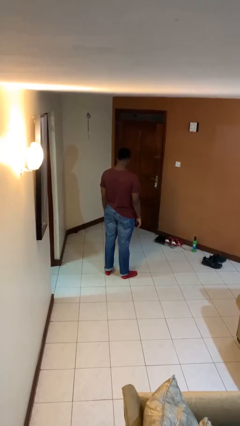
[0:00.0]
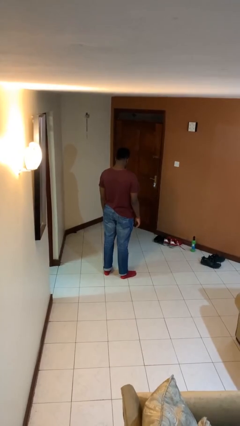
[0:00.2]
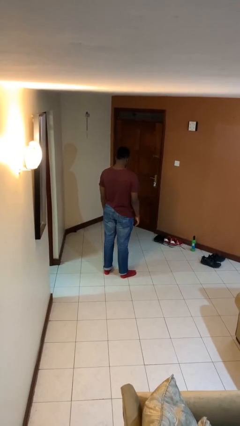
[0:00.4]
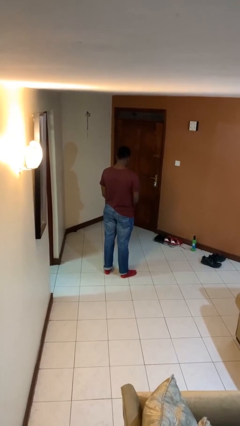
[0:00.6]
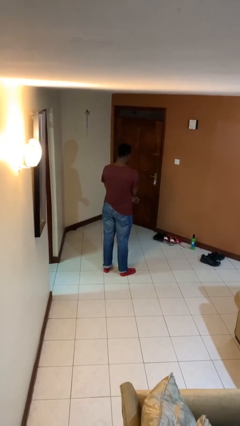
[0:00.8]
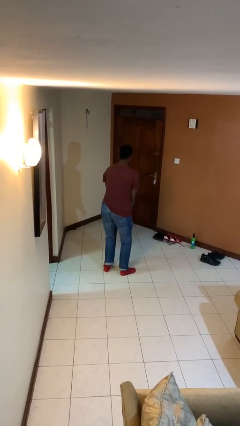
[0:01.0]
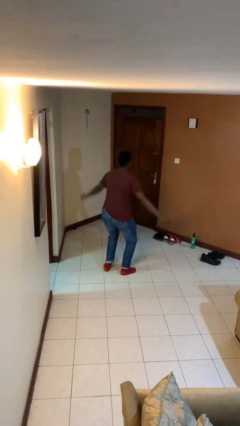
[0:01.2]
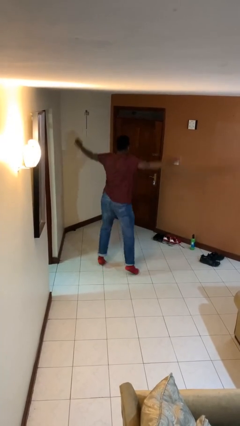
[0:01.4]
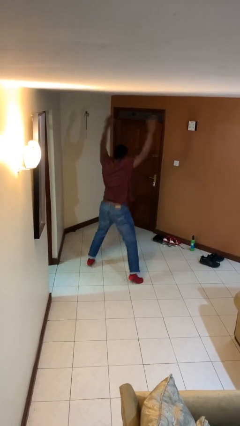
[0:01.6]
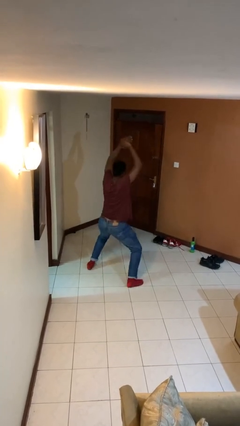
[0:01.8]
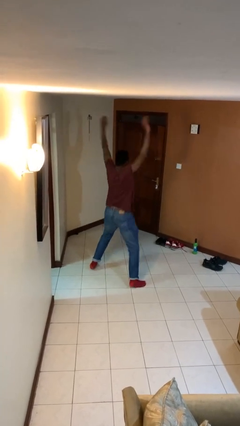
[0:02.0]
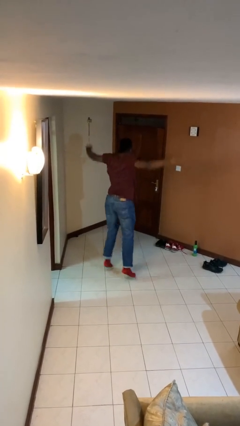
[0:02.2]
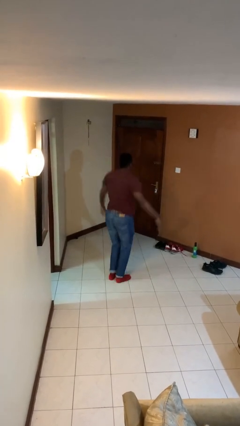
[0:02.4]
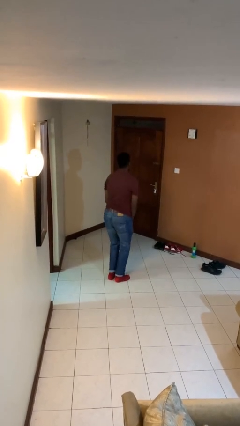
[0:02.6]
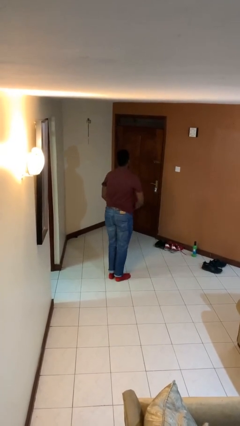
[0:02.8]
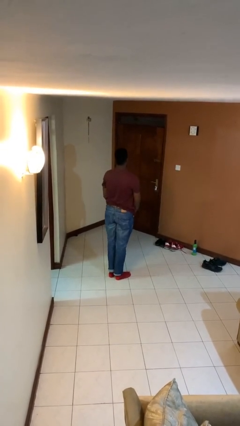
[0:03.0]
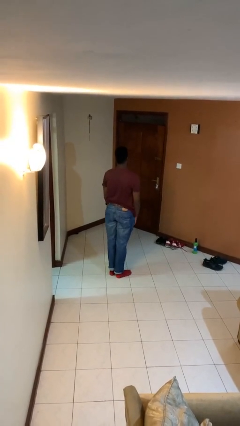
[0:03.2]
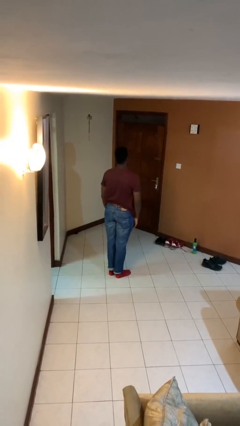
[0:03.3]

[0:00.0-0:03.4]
person exercises with jumping jacks

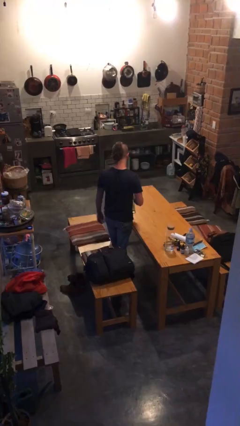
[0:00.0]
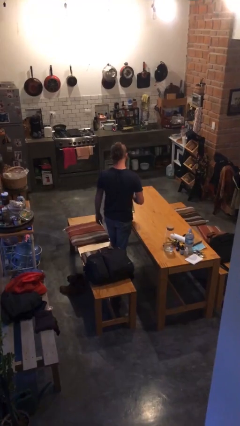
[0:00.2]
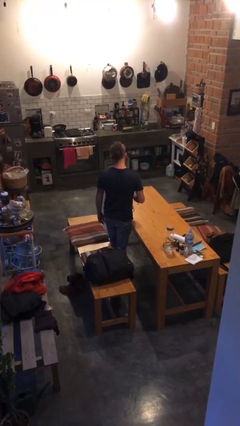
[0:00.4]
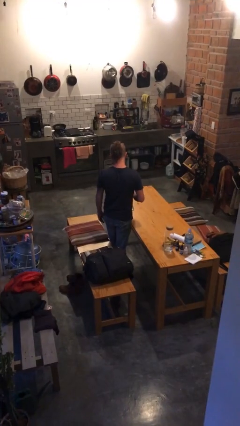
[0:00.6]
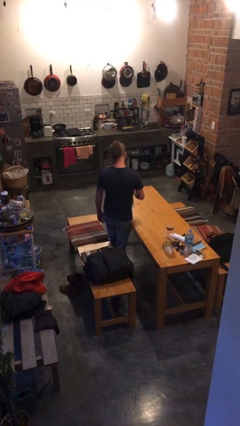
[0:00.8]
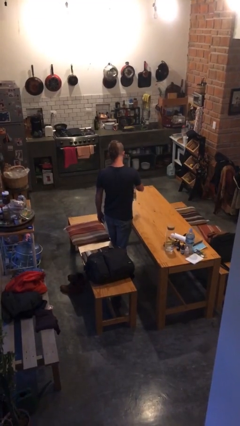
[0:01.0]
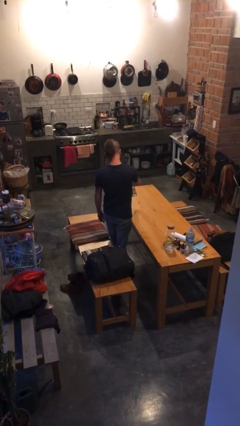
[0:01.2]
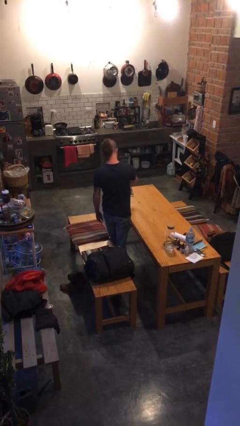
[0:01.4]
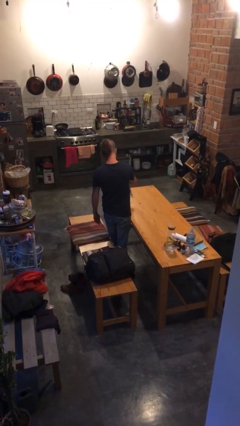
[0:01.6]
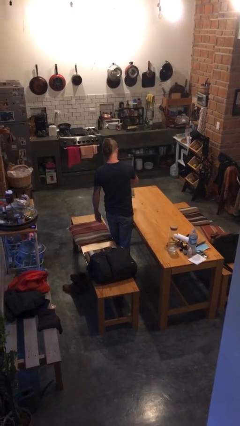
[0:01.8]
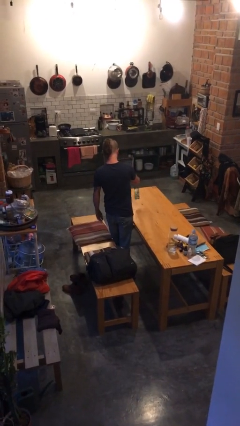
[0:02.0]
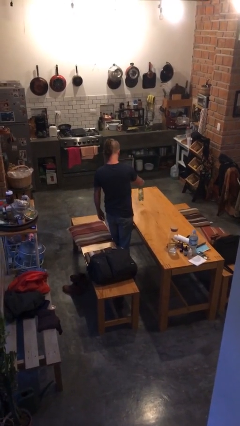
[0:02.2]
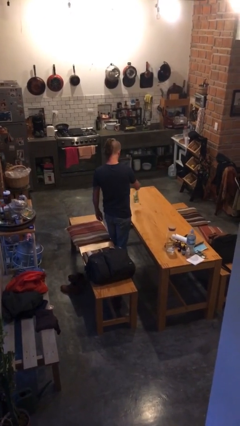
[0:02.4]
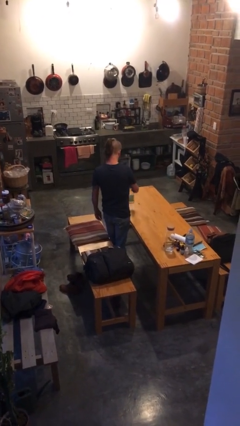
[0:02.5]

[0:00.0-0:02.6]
person sprays from bottle

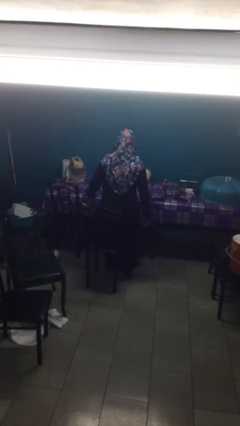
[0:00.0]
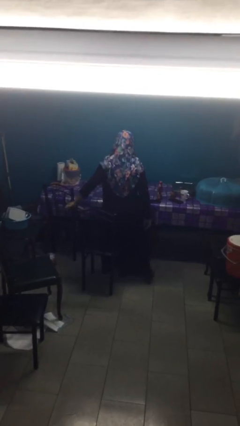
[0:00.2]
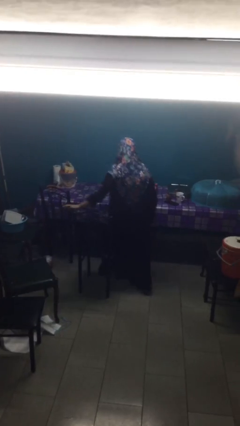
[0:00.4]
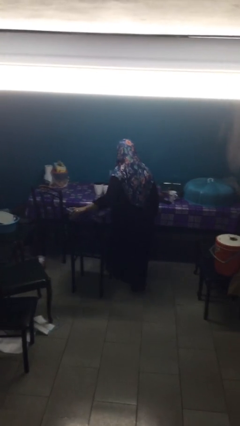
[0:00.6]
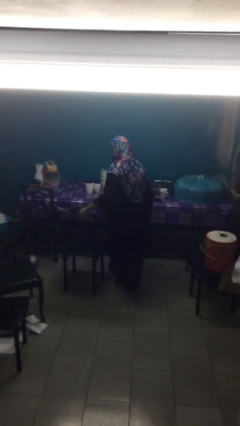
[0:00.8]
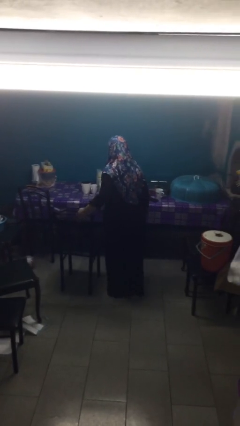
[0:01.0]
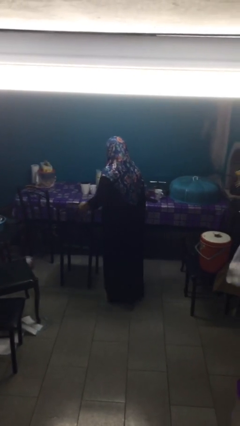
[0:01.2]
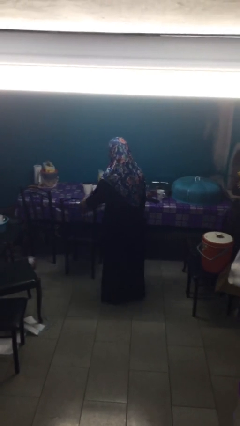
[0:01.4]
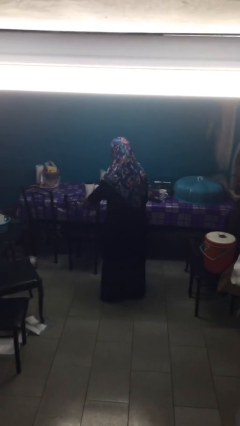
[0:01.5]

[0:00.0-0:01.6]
person stands up

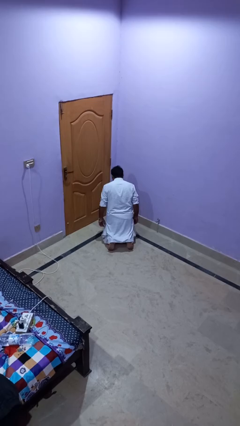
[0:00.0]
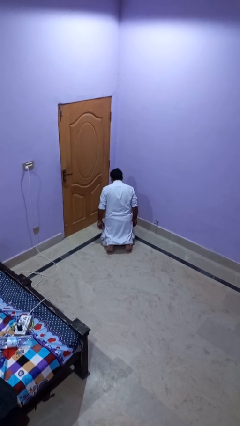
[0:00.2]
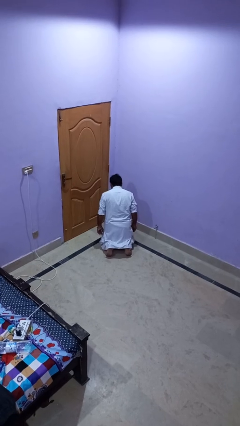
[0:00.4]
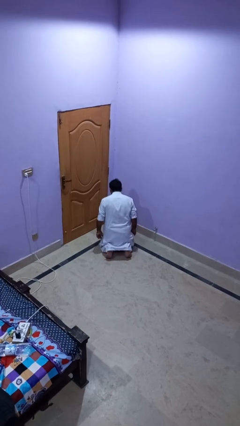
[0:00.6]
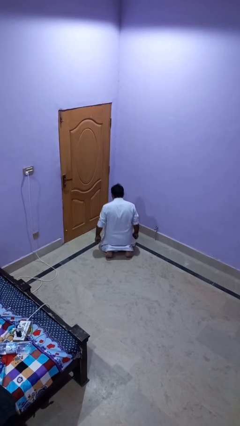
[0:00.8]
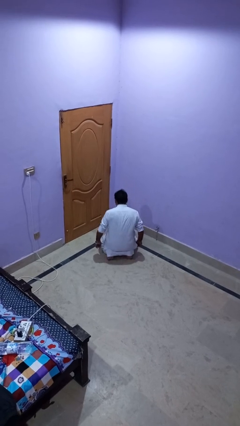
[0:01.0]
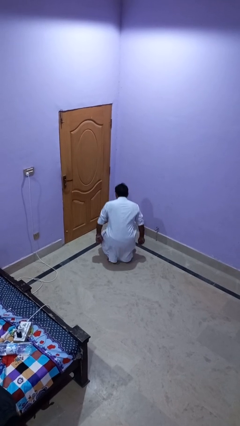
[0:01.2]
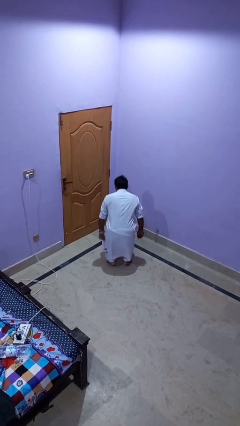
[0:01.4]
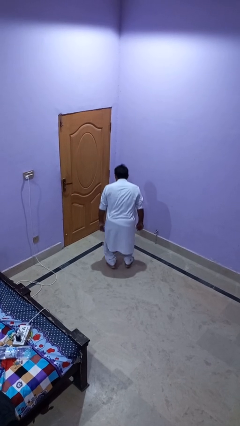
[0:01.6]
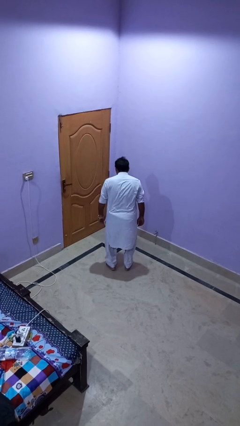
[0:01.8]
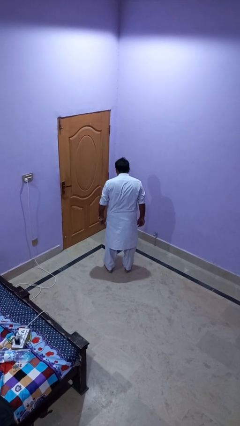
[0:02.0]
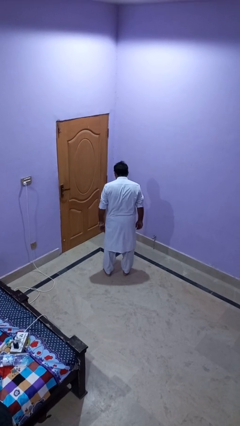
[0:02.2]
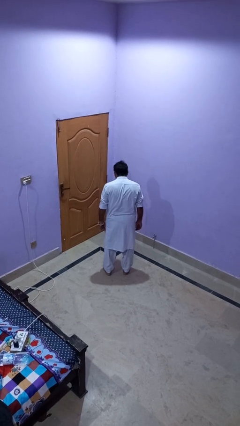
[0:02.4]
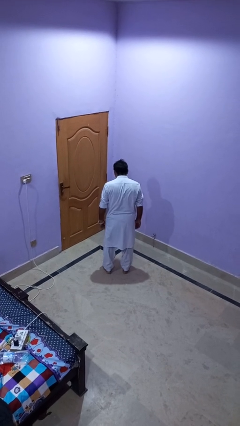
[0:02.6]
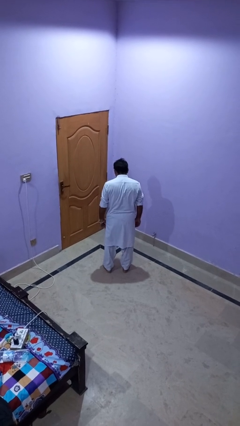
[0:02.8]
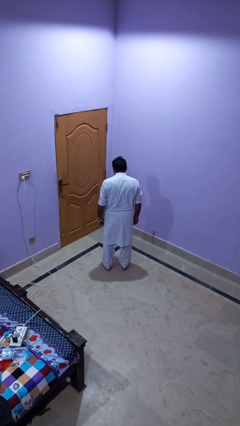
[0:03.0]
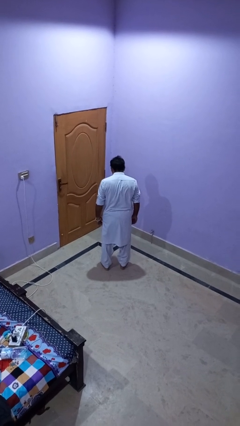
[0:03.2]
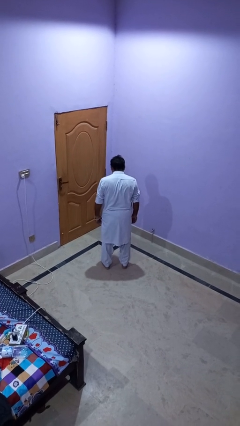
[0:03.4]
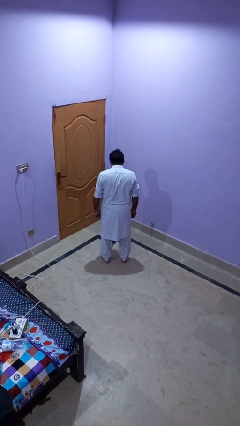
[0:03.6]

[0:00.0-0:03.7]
person stands up from floor

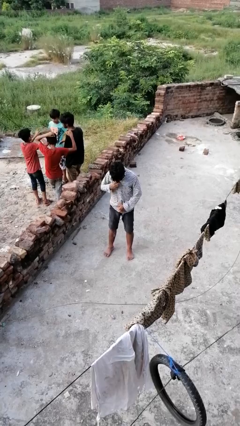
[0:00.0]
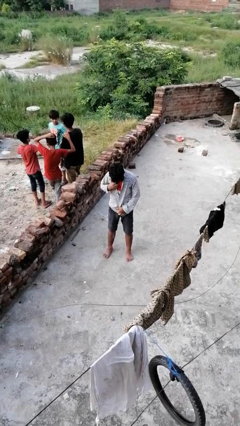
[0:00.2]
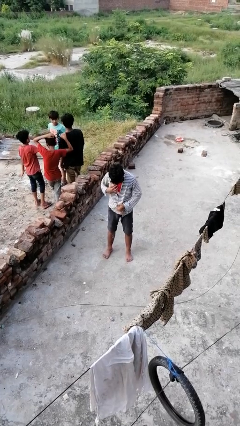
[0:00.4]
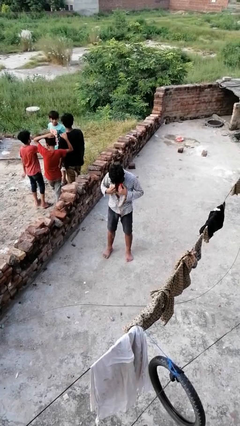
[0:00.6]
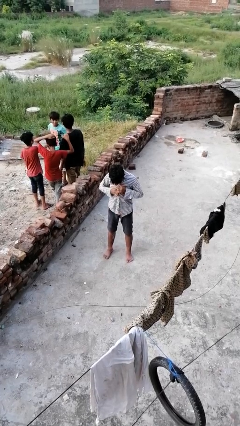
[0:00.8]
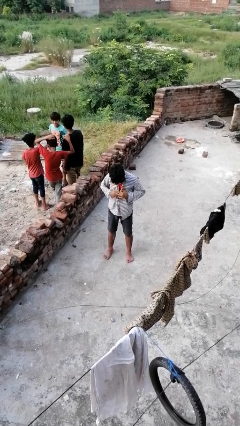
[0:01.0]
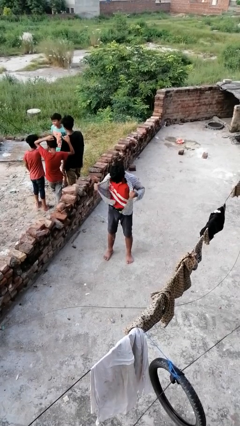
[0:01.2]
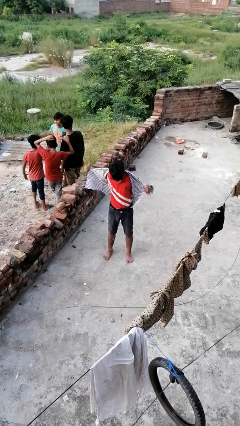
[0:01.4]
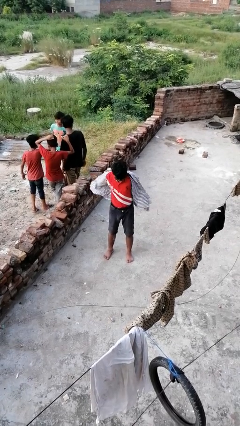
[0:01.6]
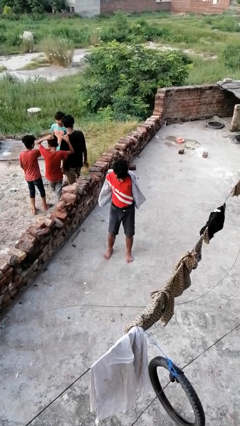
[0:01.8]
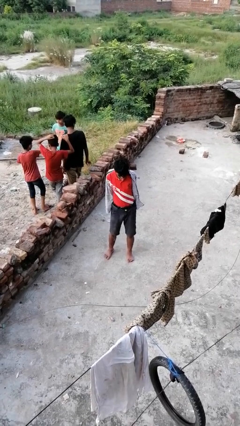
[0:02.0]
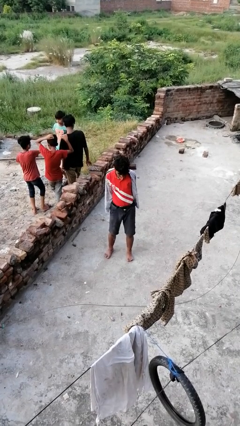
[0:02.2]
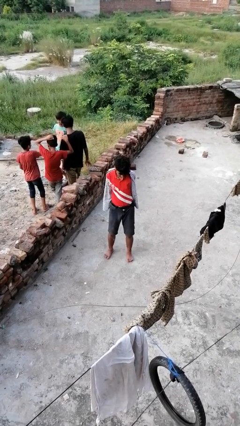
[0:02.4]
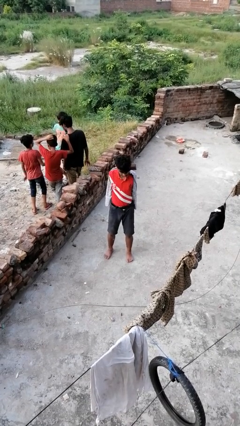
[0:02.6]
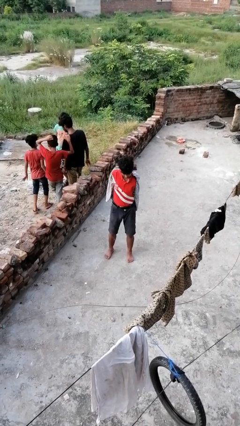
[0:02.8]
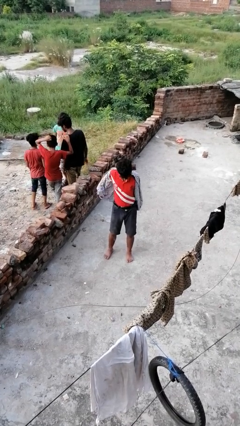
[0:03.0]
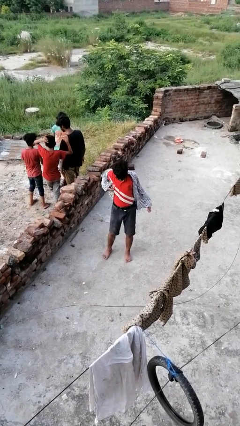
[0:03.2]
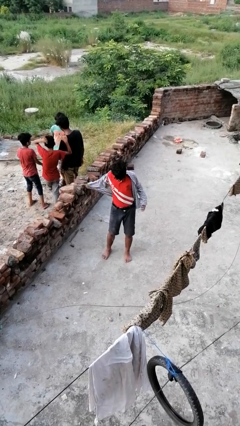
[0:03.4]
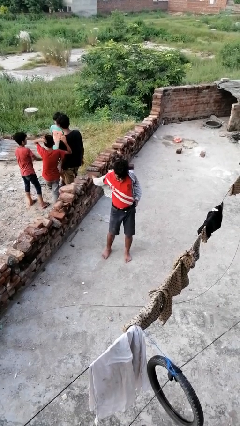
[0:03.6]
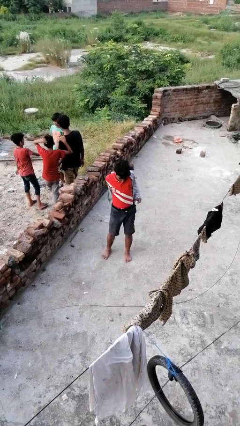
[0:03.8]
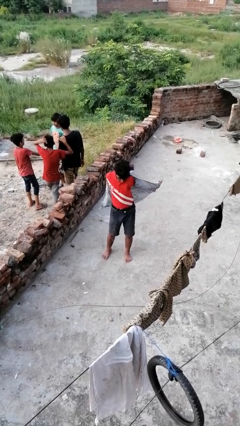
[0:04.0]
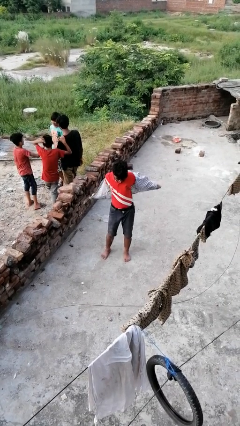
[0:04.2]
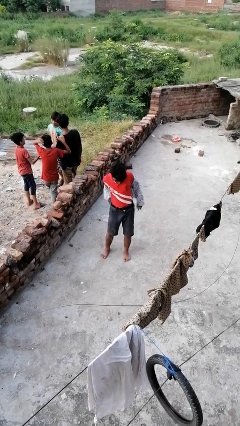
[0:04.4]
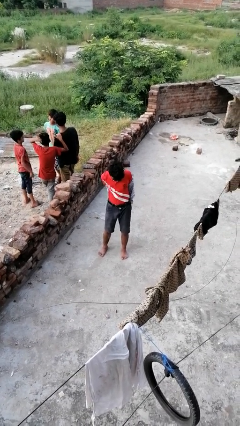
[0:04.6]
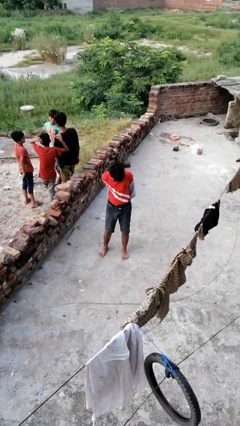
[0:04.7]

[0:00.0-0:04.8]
person takes off shirt

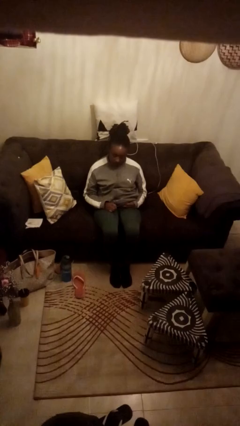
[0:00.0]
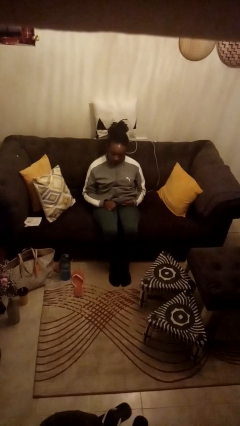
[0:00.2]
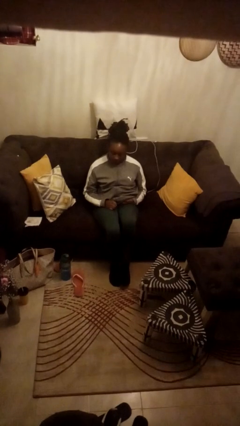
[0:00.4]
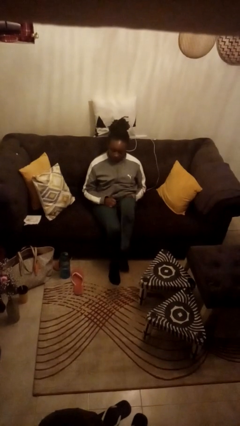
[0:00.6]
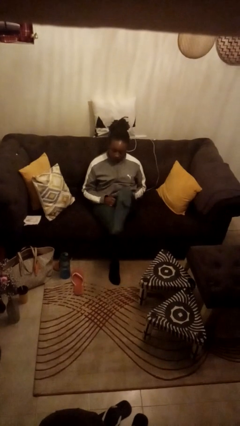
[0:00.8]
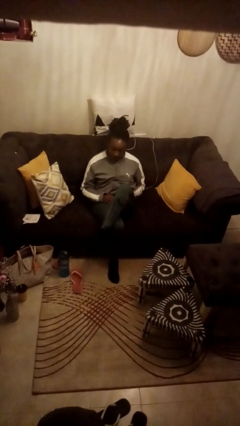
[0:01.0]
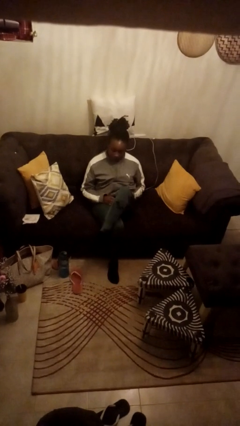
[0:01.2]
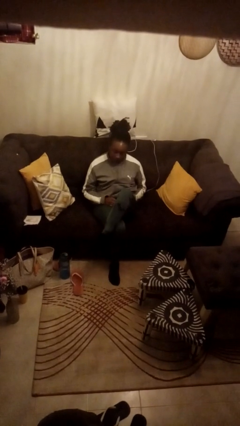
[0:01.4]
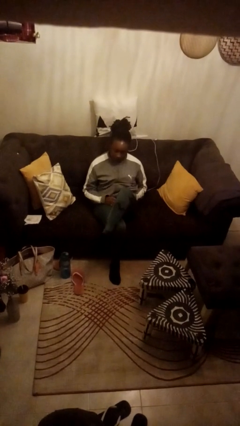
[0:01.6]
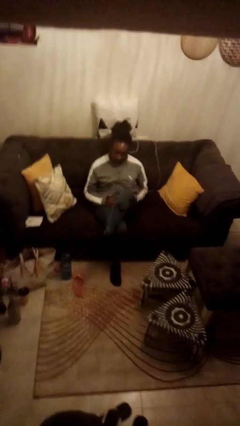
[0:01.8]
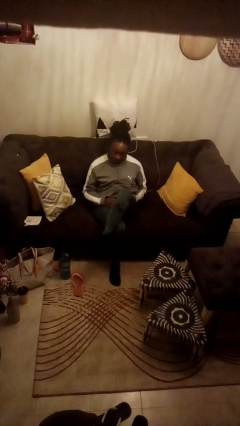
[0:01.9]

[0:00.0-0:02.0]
person crosses legs
